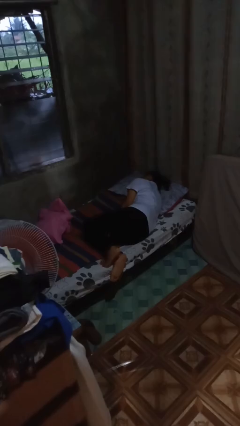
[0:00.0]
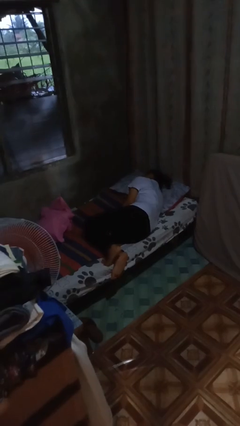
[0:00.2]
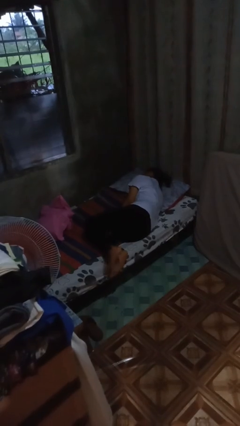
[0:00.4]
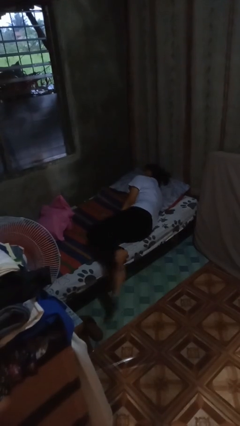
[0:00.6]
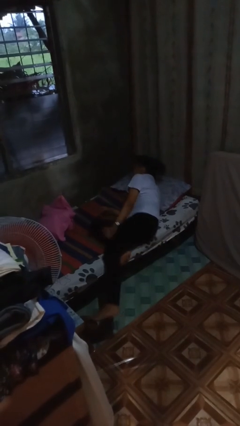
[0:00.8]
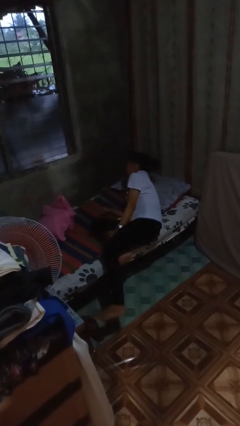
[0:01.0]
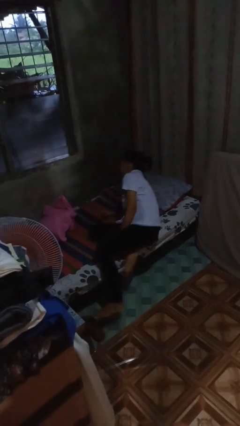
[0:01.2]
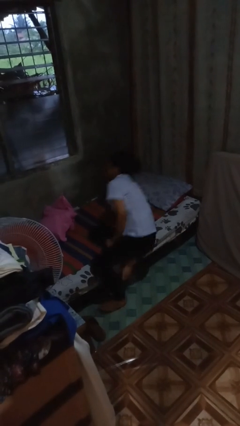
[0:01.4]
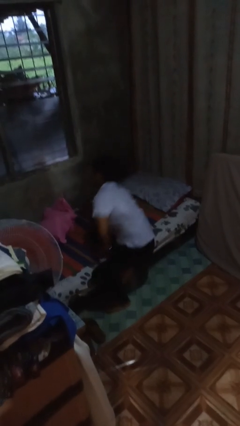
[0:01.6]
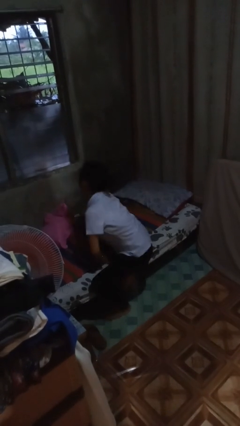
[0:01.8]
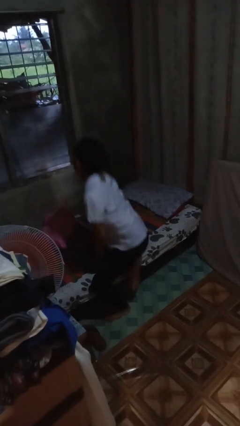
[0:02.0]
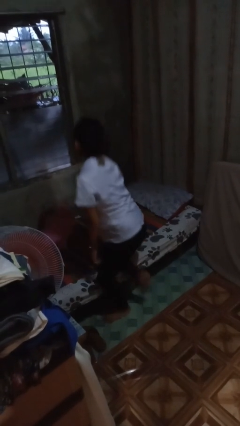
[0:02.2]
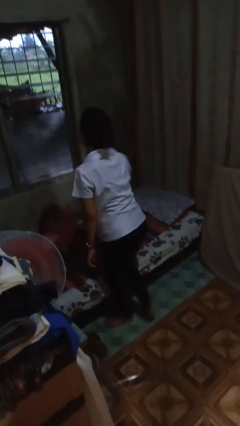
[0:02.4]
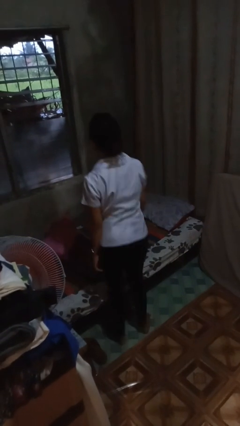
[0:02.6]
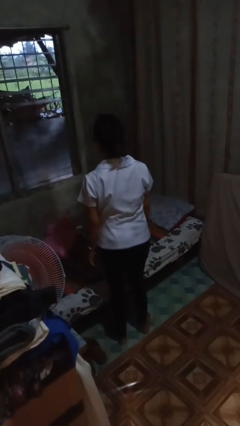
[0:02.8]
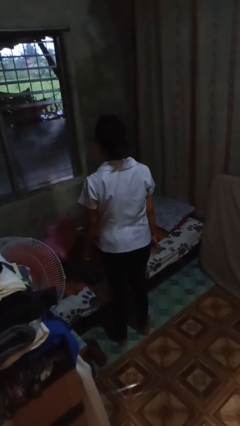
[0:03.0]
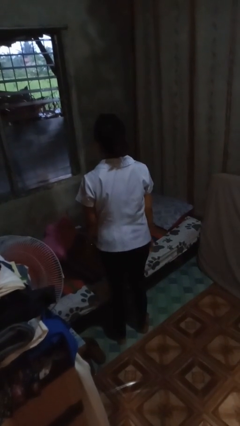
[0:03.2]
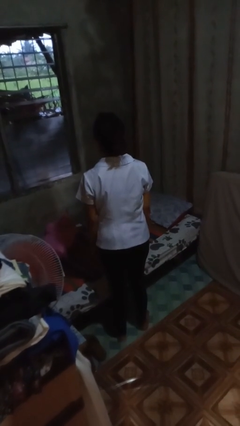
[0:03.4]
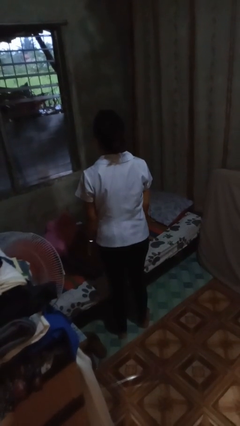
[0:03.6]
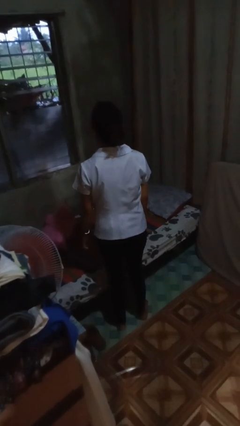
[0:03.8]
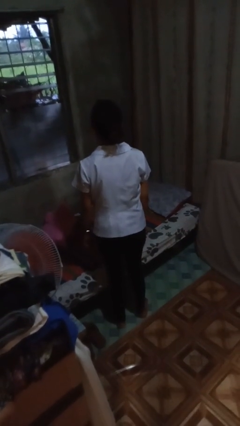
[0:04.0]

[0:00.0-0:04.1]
person stands up

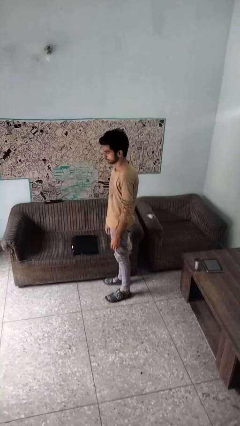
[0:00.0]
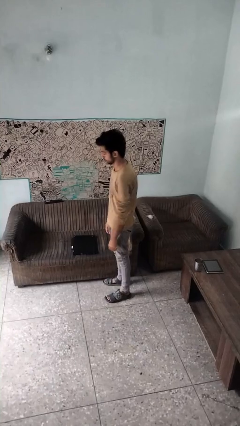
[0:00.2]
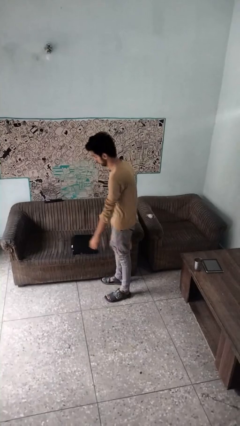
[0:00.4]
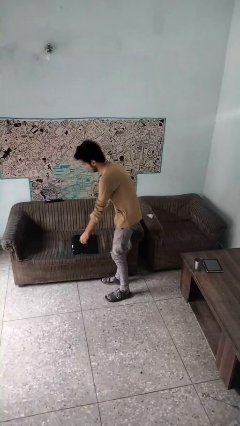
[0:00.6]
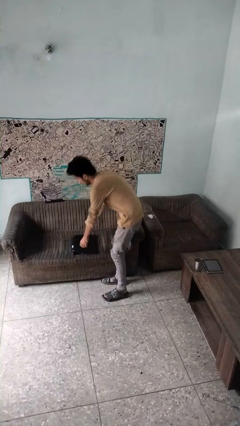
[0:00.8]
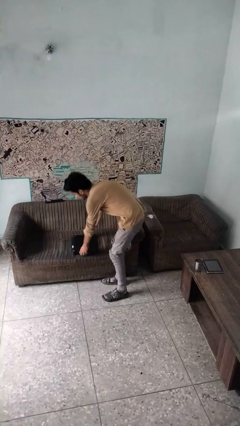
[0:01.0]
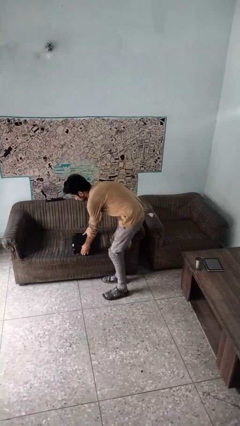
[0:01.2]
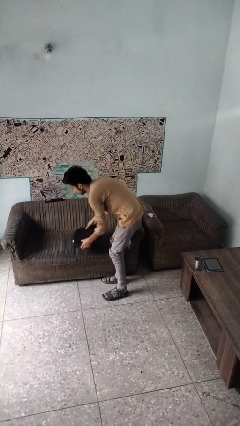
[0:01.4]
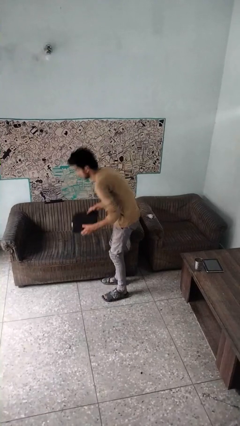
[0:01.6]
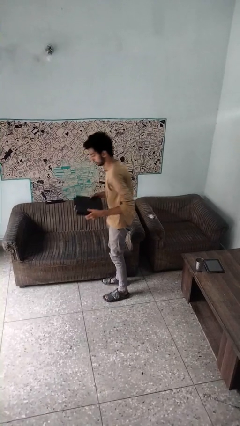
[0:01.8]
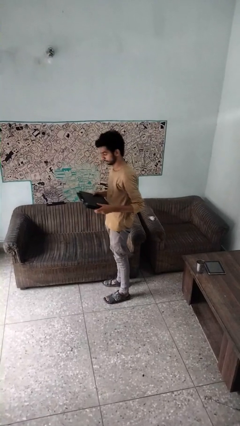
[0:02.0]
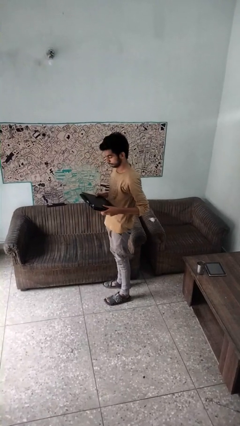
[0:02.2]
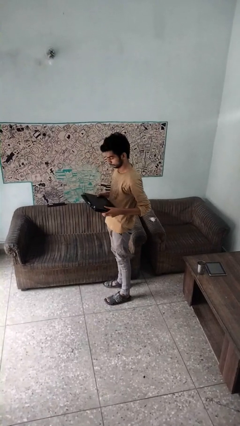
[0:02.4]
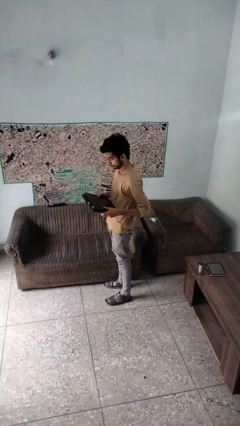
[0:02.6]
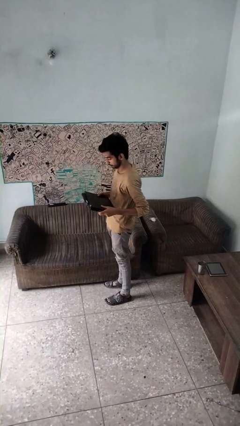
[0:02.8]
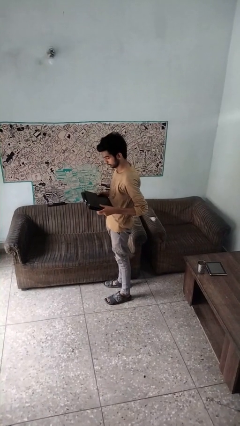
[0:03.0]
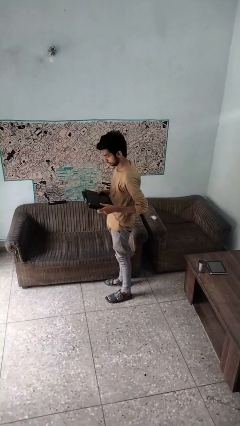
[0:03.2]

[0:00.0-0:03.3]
person picks up object from couch

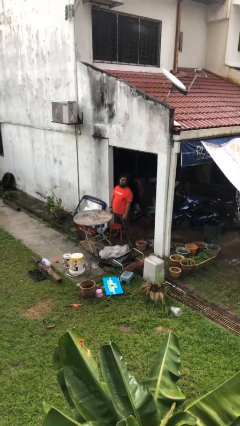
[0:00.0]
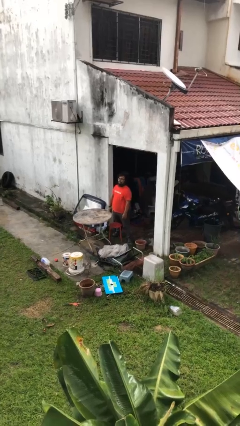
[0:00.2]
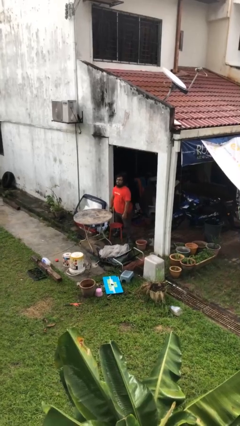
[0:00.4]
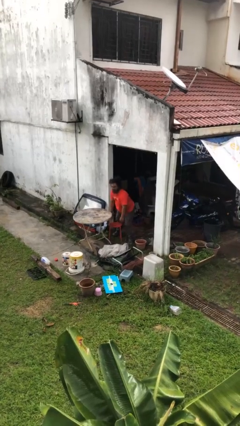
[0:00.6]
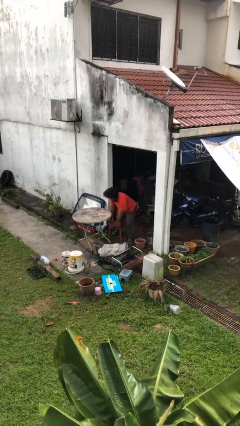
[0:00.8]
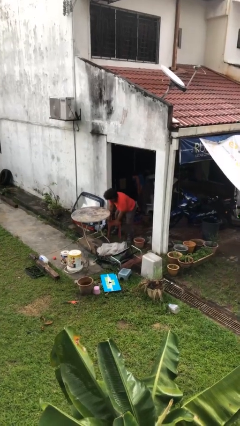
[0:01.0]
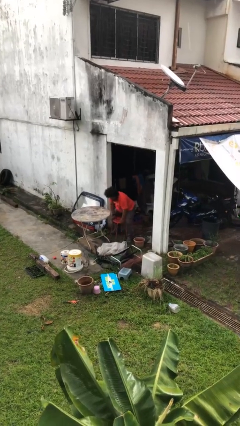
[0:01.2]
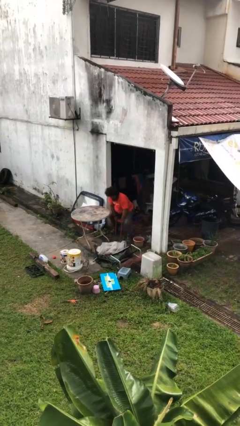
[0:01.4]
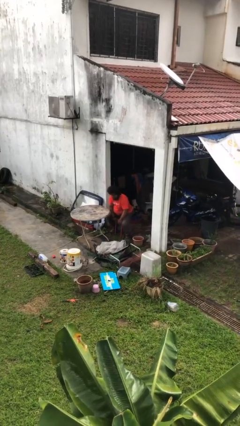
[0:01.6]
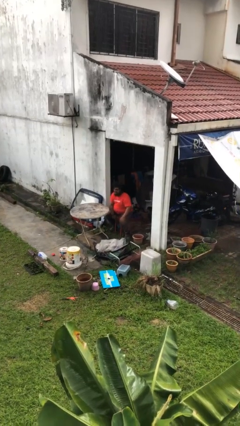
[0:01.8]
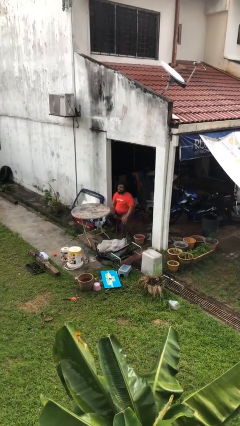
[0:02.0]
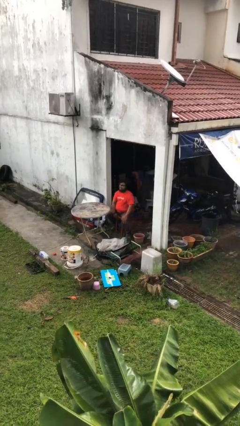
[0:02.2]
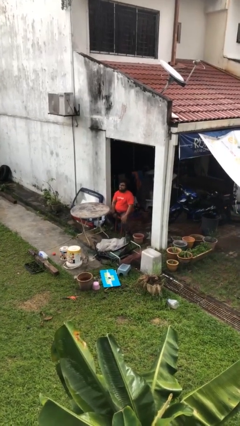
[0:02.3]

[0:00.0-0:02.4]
person sits down

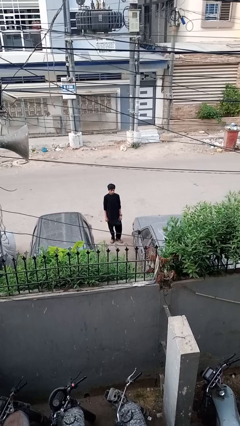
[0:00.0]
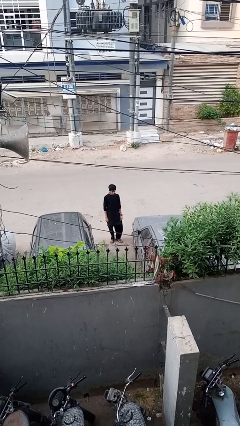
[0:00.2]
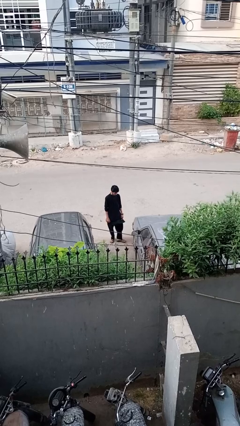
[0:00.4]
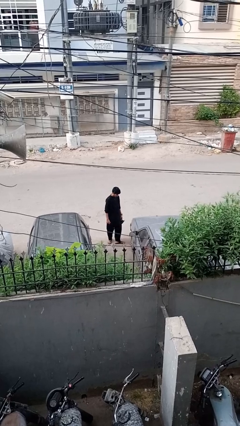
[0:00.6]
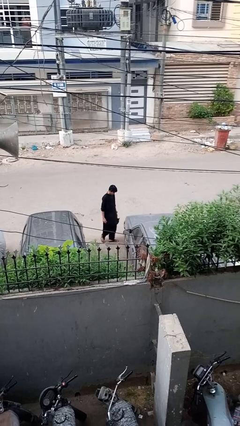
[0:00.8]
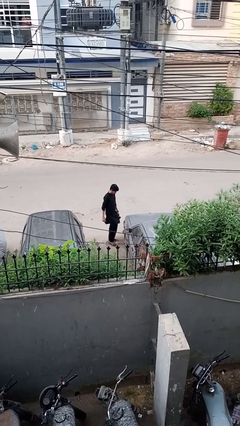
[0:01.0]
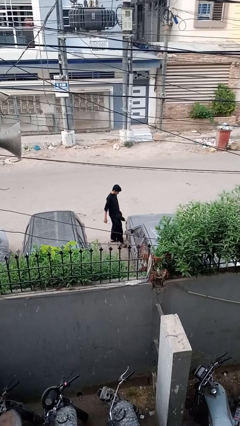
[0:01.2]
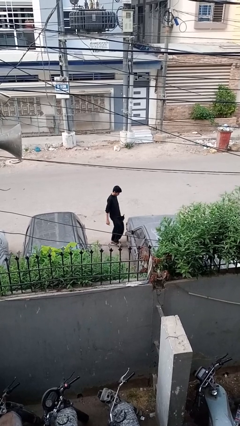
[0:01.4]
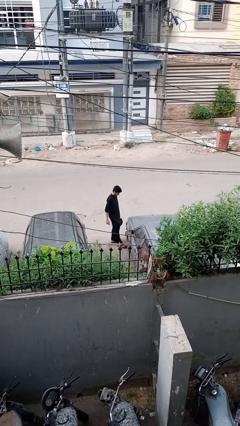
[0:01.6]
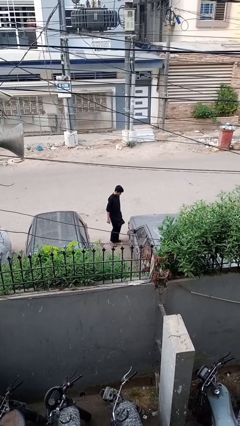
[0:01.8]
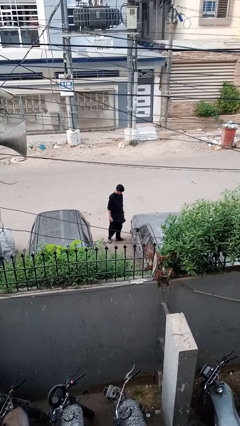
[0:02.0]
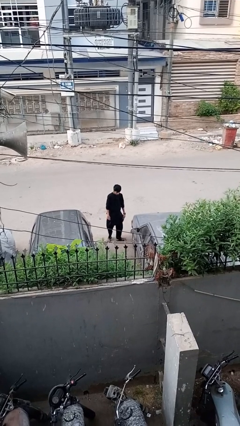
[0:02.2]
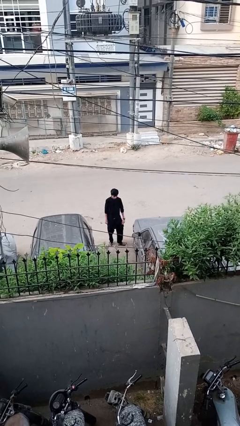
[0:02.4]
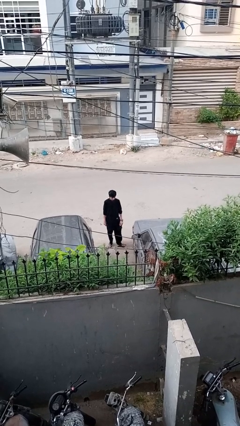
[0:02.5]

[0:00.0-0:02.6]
person kicks car tires

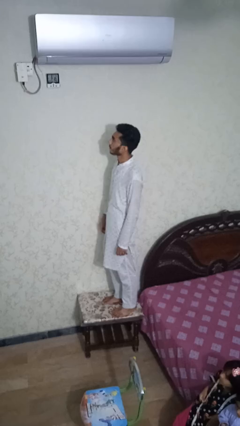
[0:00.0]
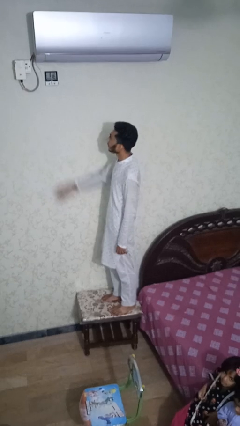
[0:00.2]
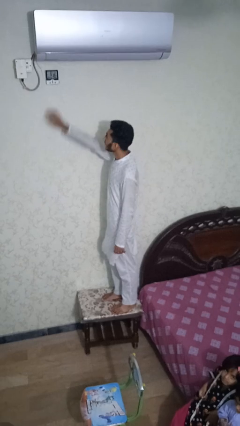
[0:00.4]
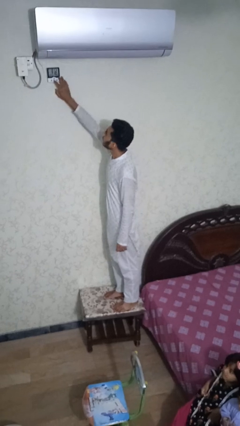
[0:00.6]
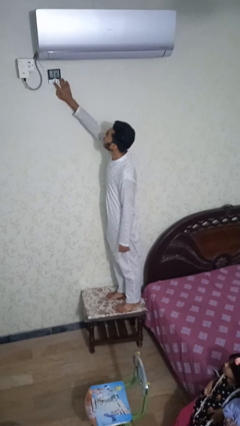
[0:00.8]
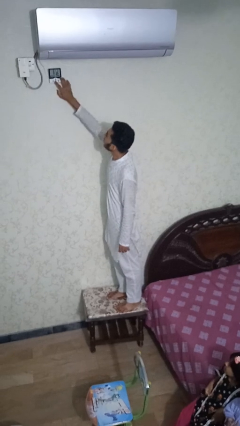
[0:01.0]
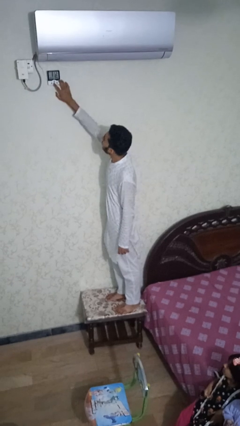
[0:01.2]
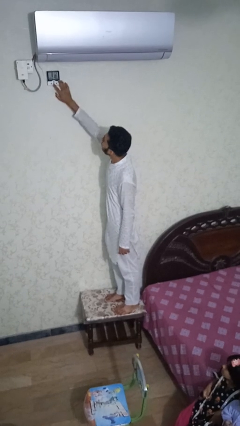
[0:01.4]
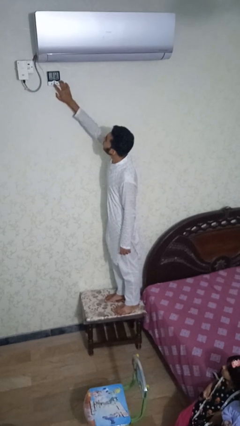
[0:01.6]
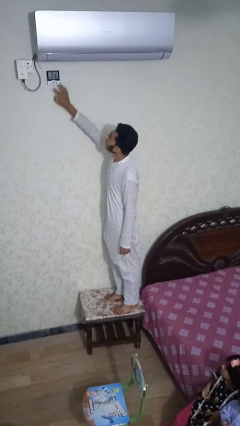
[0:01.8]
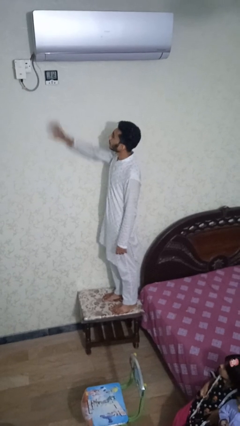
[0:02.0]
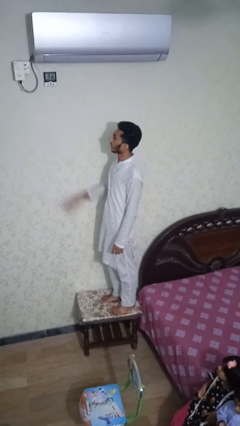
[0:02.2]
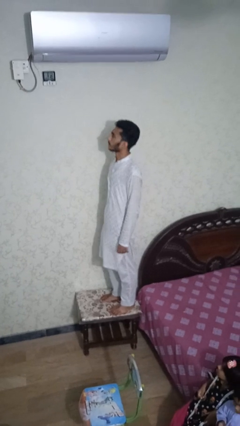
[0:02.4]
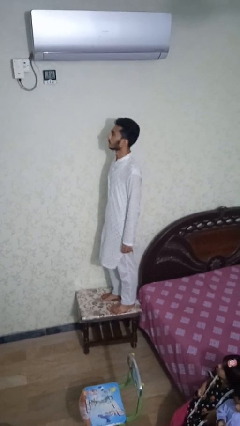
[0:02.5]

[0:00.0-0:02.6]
person adjusts thermostat

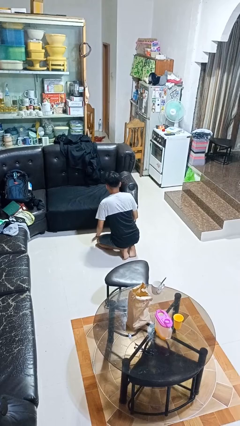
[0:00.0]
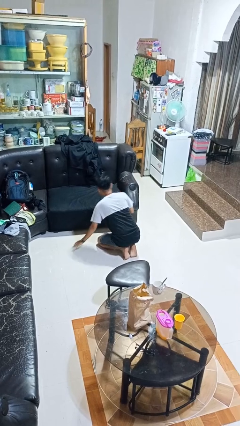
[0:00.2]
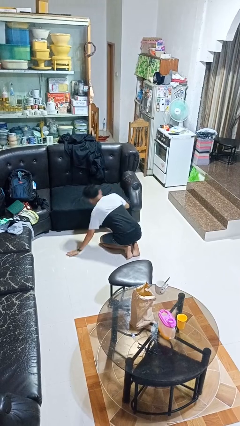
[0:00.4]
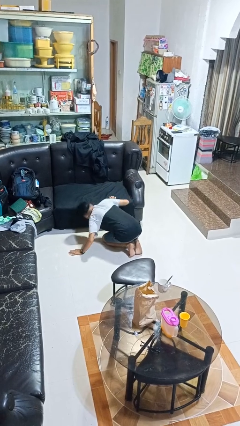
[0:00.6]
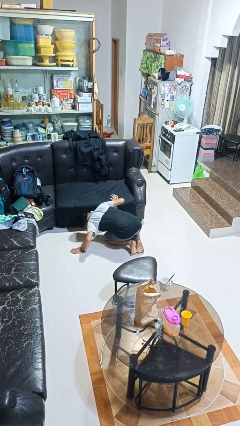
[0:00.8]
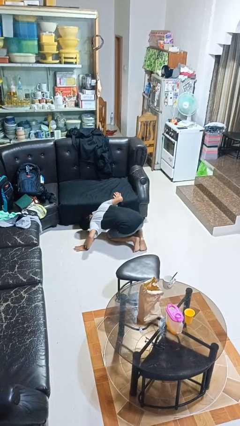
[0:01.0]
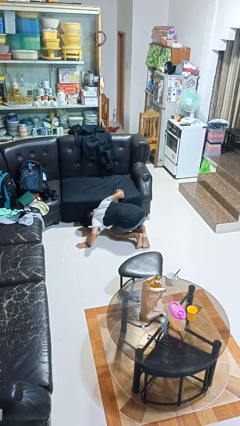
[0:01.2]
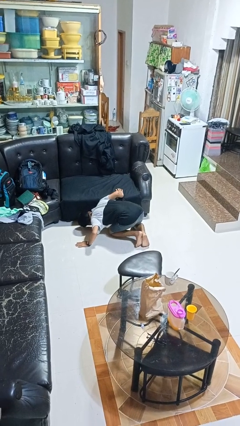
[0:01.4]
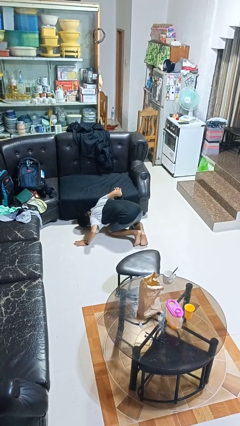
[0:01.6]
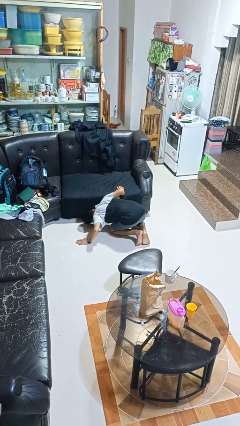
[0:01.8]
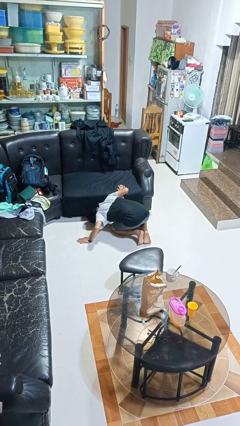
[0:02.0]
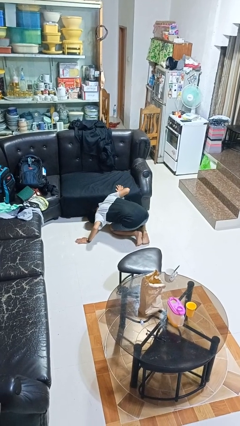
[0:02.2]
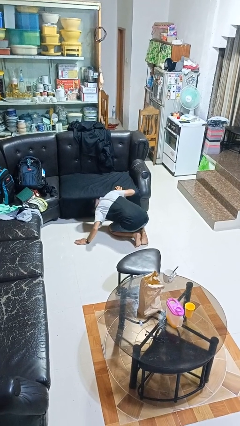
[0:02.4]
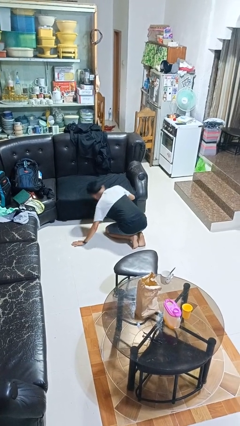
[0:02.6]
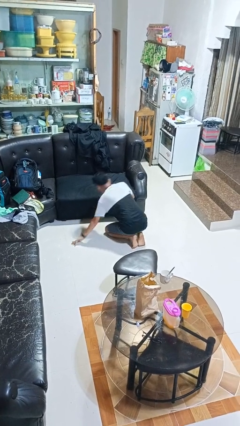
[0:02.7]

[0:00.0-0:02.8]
person searches under couch
